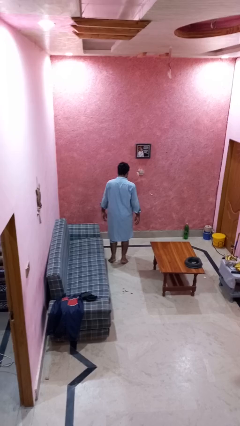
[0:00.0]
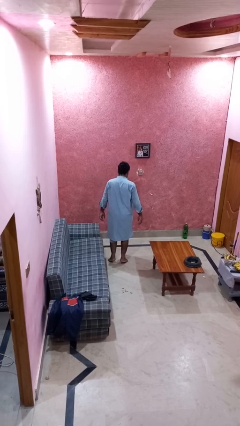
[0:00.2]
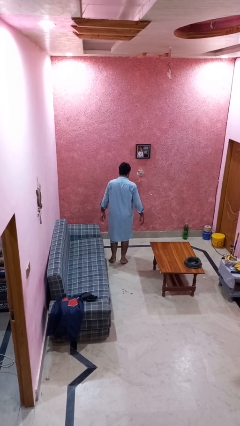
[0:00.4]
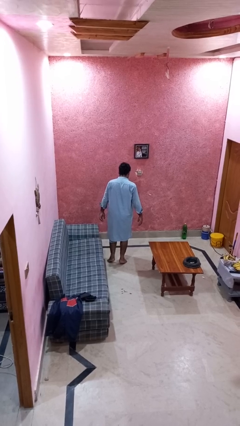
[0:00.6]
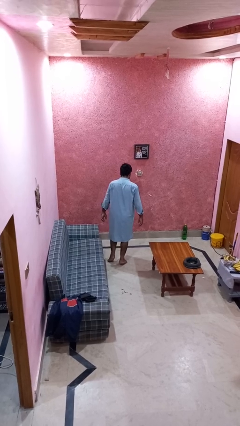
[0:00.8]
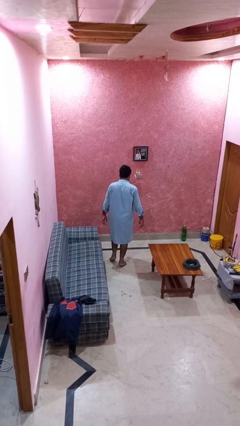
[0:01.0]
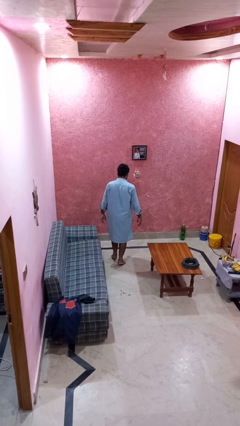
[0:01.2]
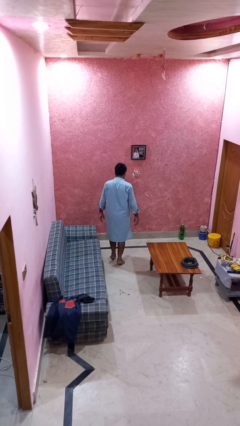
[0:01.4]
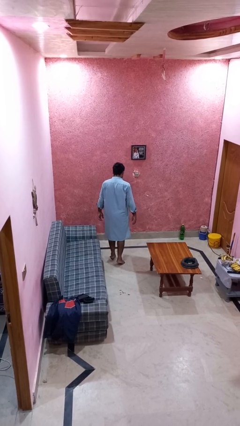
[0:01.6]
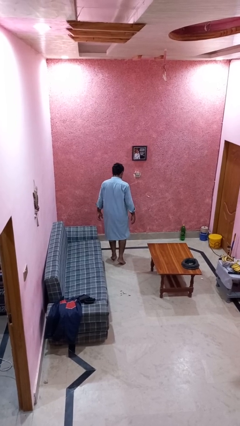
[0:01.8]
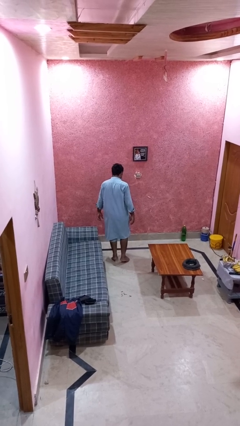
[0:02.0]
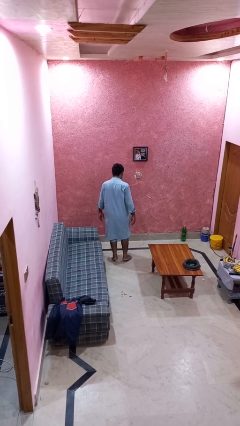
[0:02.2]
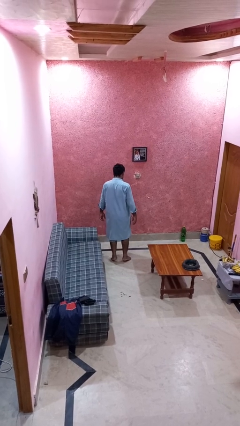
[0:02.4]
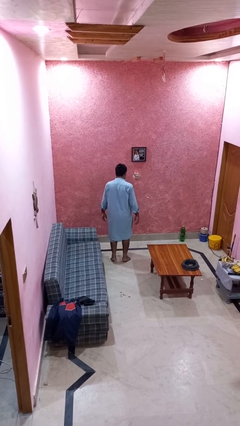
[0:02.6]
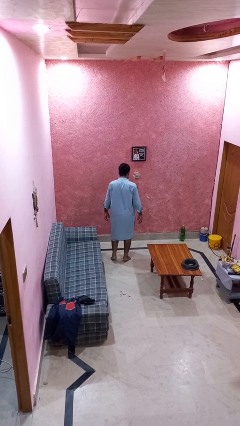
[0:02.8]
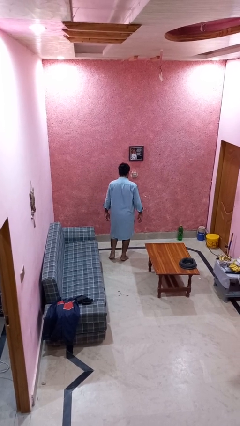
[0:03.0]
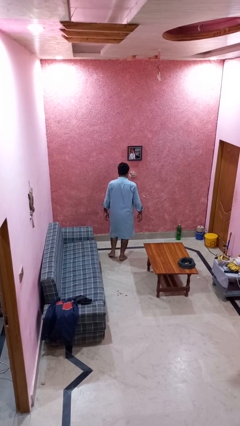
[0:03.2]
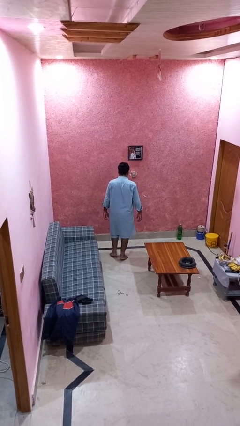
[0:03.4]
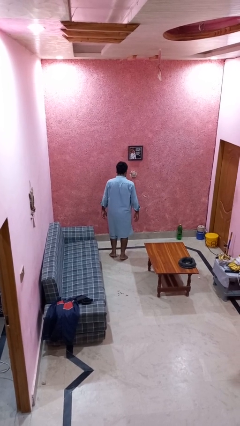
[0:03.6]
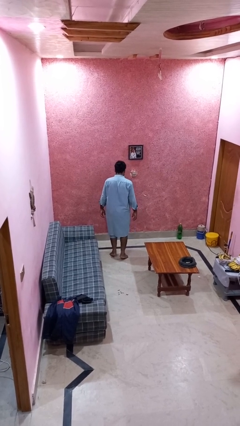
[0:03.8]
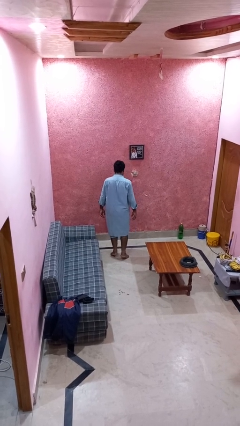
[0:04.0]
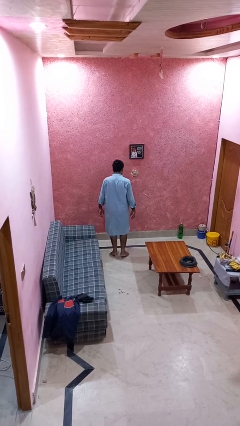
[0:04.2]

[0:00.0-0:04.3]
person walks tiptoe

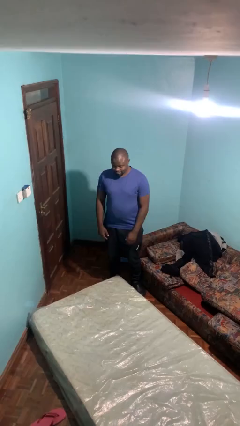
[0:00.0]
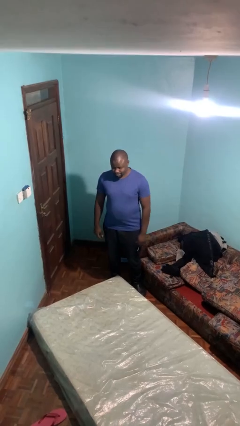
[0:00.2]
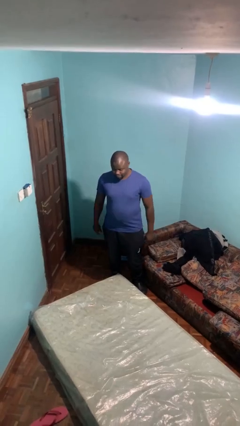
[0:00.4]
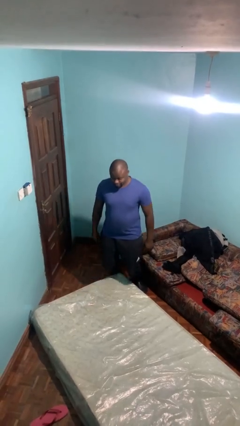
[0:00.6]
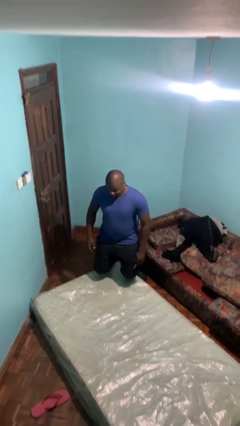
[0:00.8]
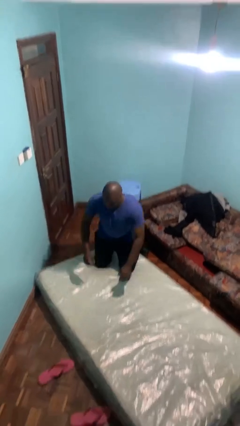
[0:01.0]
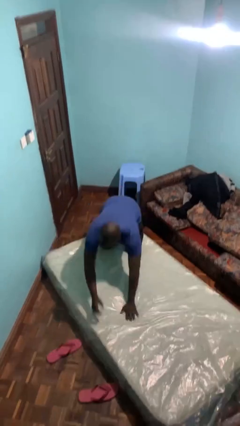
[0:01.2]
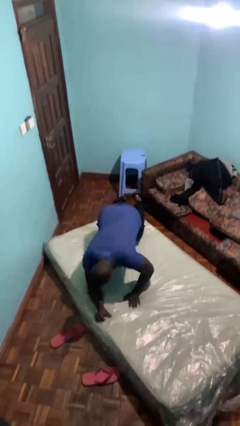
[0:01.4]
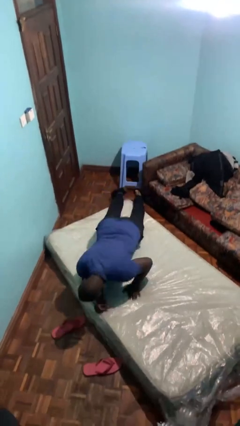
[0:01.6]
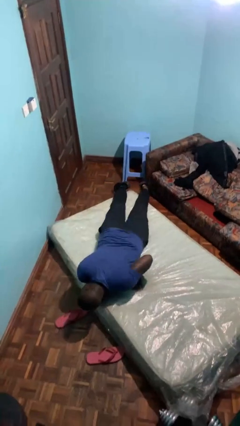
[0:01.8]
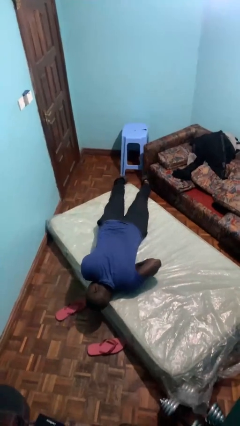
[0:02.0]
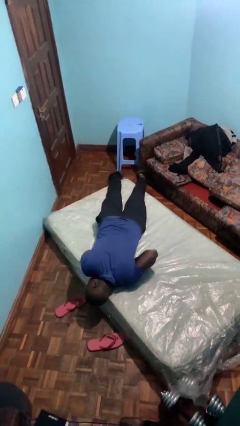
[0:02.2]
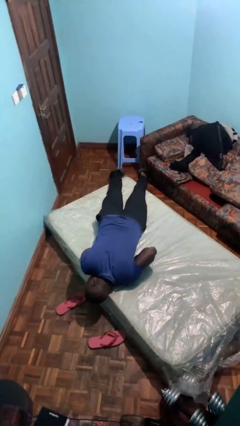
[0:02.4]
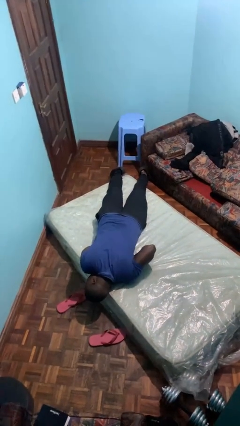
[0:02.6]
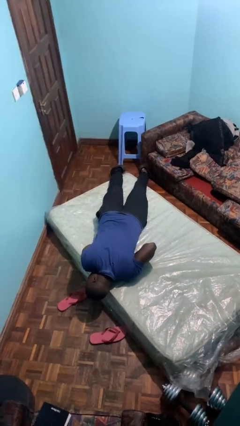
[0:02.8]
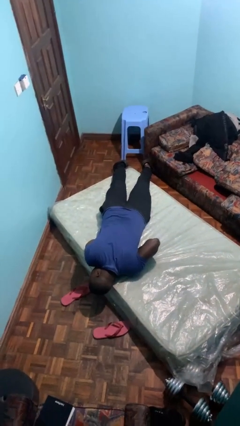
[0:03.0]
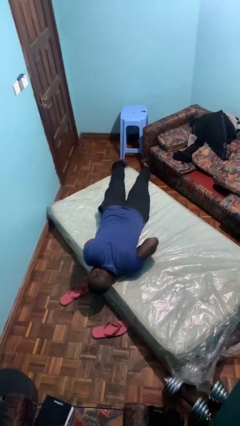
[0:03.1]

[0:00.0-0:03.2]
person lies down on bed

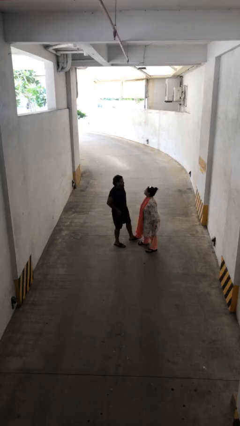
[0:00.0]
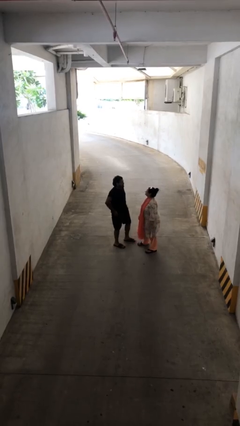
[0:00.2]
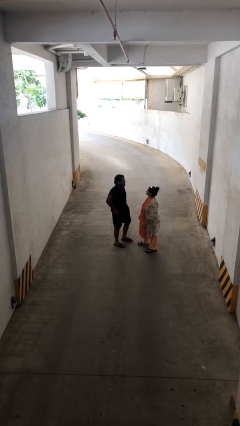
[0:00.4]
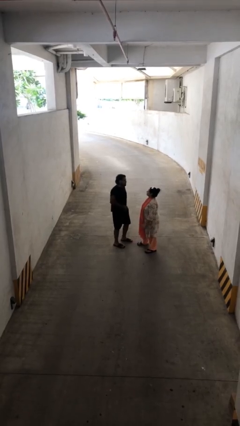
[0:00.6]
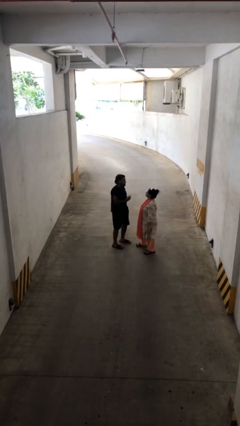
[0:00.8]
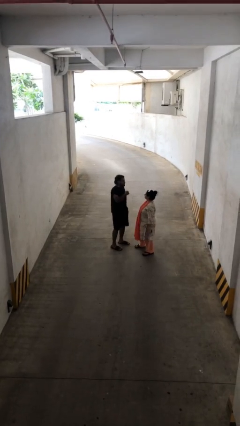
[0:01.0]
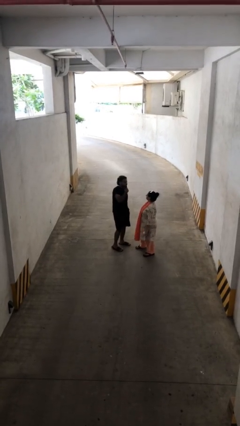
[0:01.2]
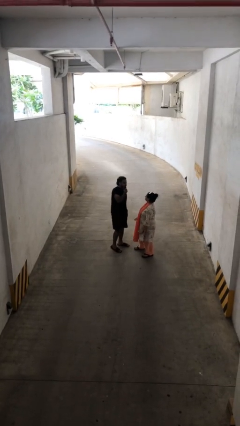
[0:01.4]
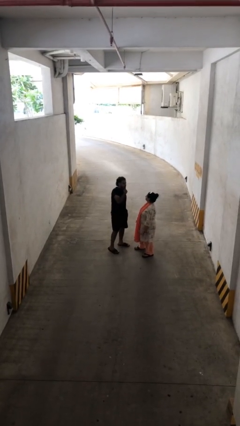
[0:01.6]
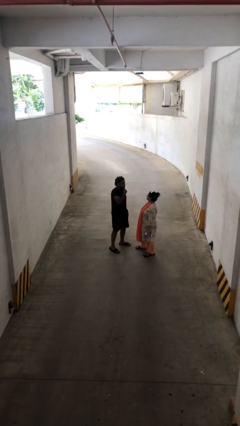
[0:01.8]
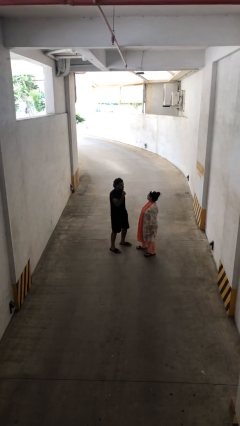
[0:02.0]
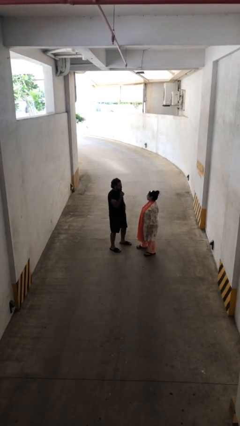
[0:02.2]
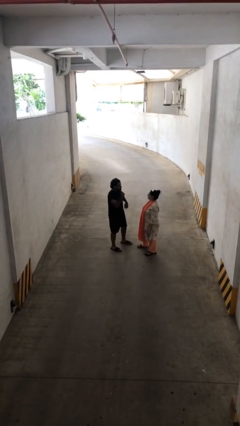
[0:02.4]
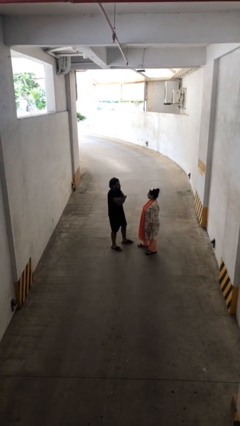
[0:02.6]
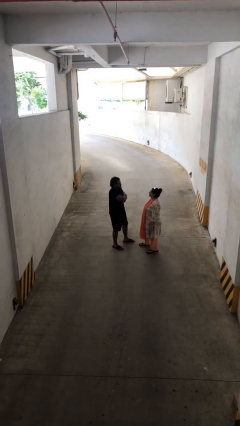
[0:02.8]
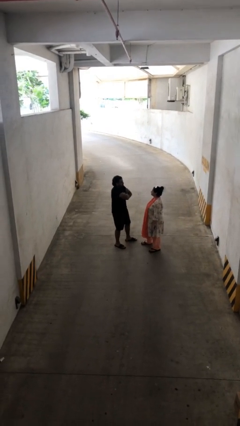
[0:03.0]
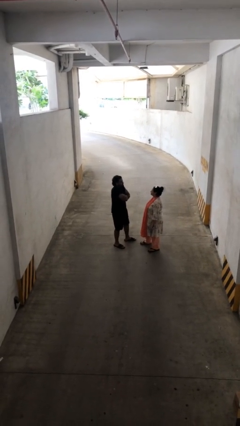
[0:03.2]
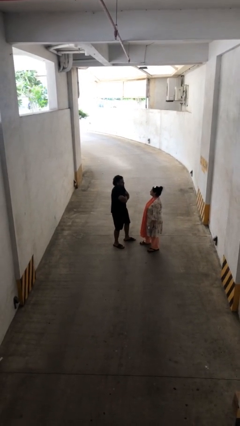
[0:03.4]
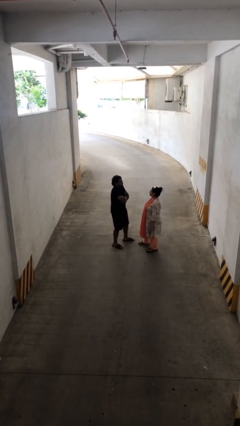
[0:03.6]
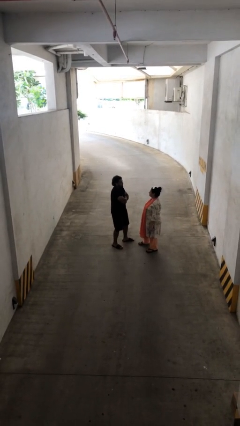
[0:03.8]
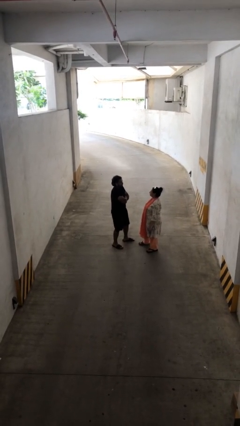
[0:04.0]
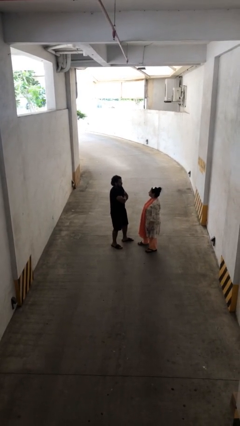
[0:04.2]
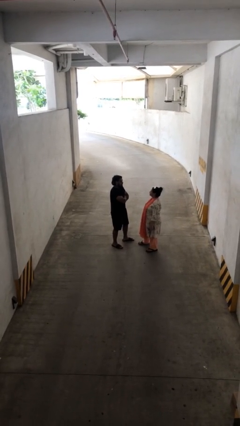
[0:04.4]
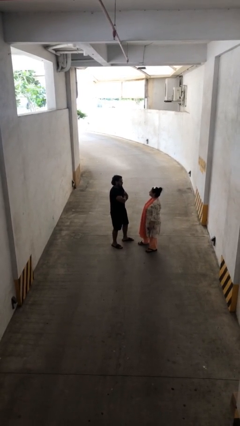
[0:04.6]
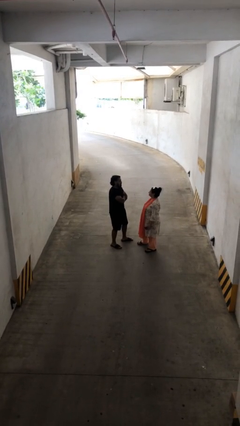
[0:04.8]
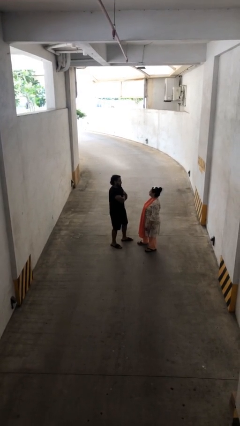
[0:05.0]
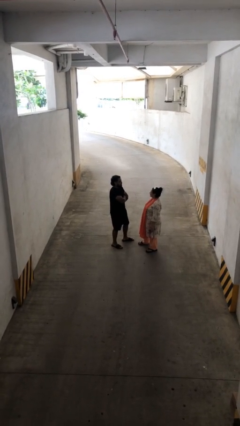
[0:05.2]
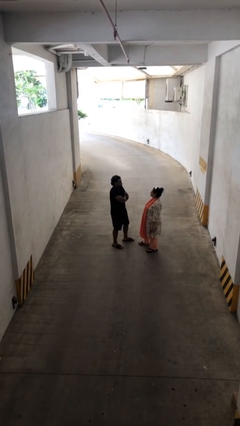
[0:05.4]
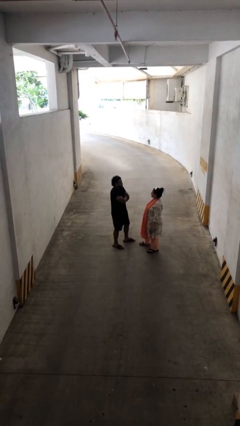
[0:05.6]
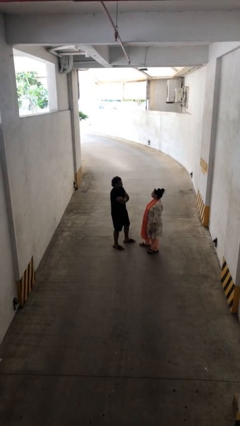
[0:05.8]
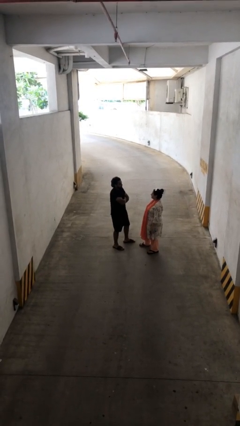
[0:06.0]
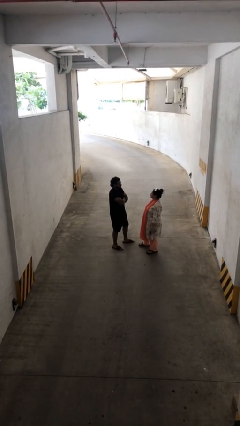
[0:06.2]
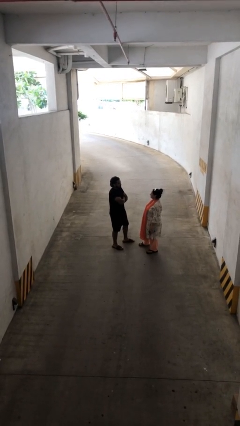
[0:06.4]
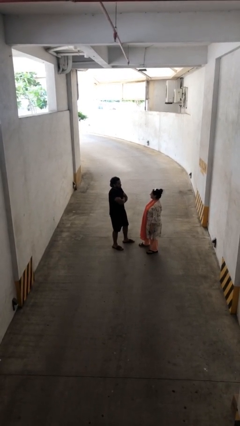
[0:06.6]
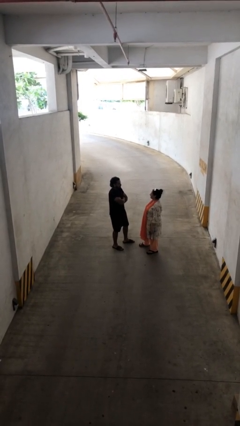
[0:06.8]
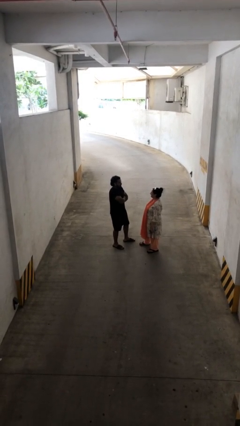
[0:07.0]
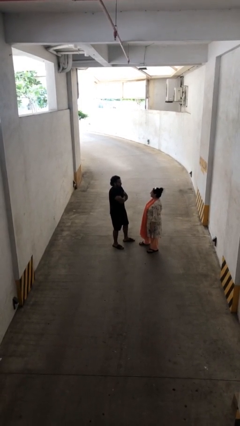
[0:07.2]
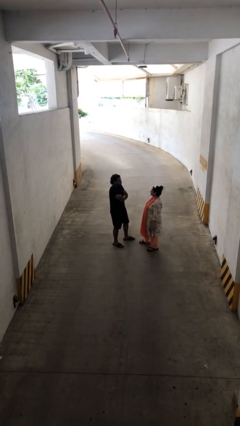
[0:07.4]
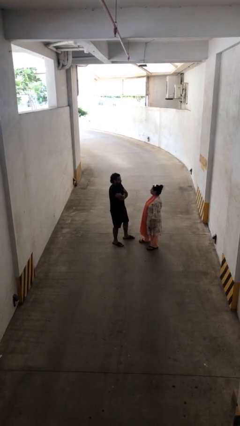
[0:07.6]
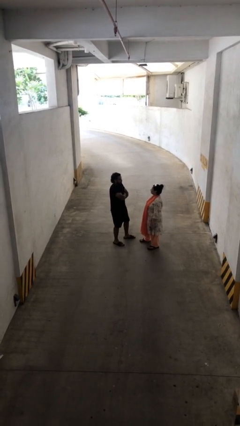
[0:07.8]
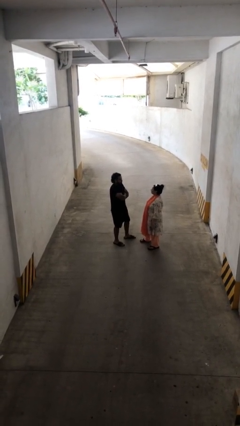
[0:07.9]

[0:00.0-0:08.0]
person talks to person

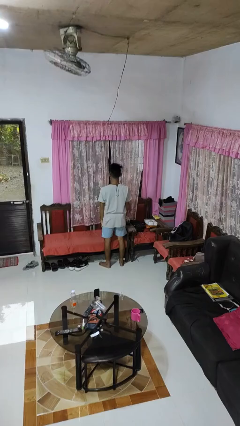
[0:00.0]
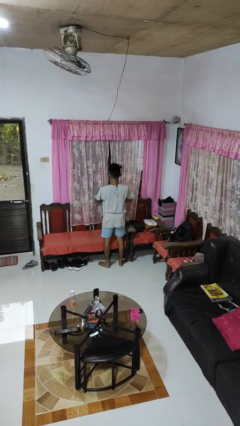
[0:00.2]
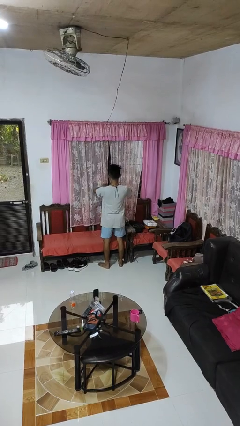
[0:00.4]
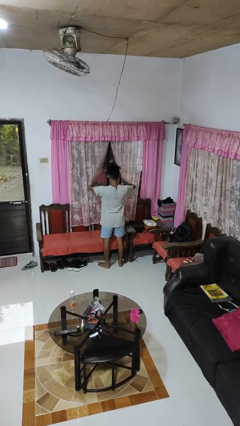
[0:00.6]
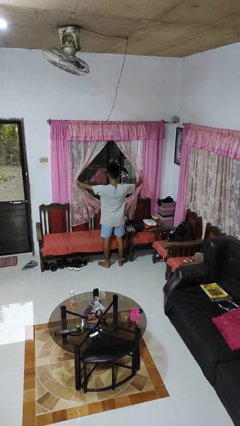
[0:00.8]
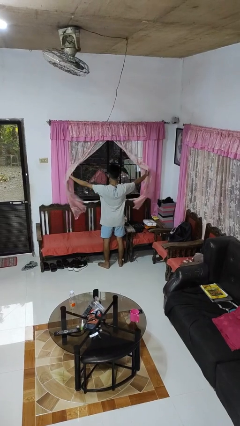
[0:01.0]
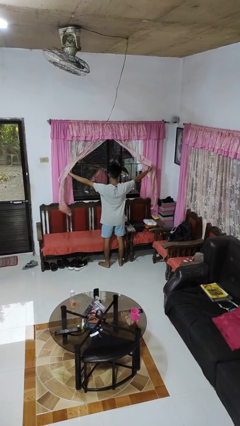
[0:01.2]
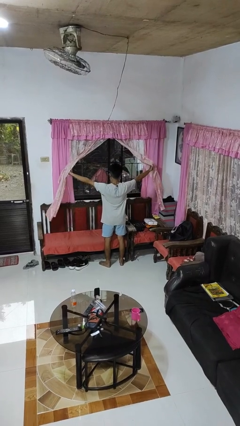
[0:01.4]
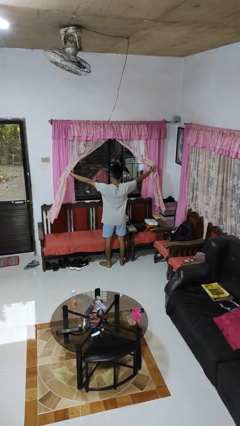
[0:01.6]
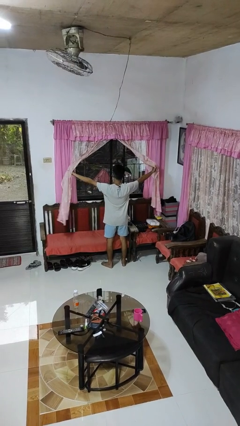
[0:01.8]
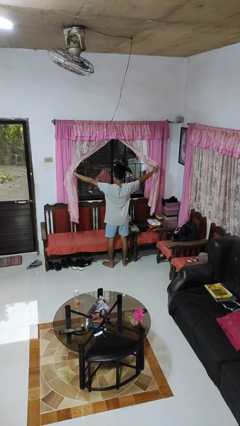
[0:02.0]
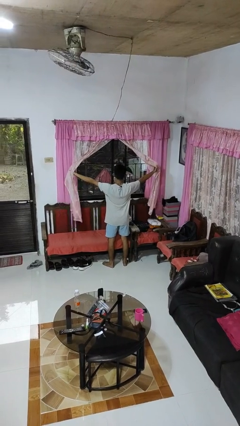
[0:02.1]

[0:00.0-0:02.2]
person opens curtains
